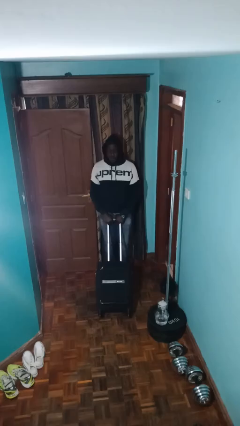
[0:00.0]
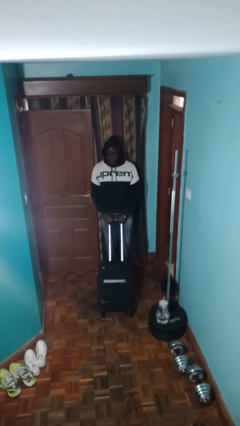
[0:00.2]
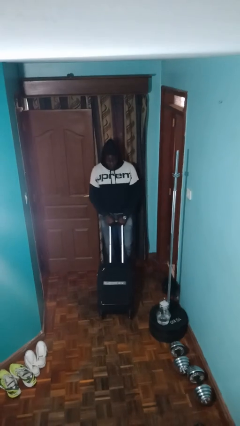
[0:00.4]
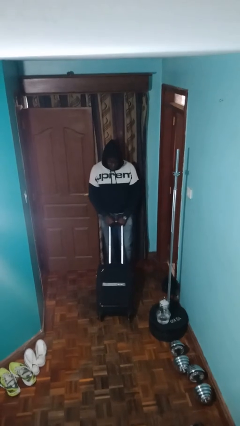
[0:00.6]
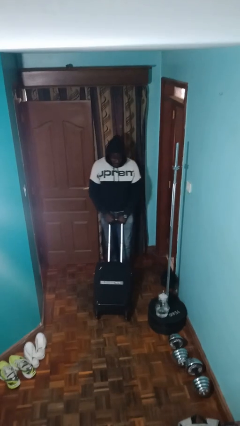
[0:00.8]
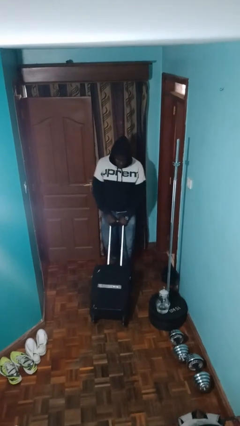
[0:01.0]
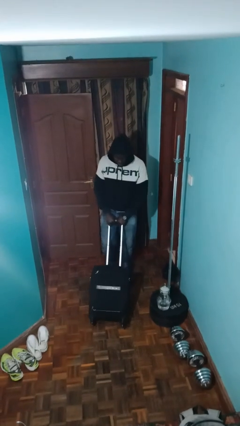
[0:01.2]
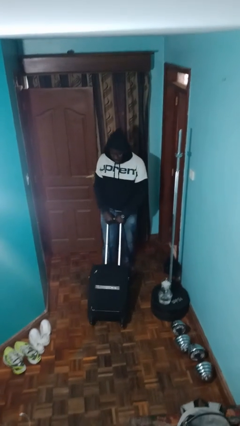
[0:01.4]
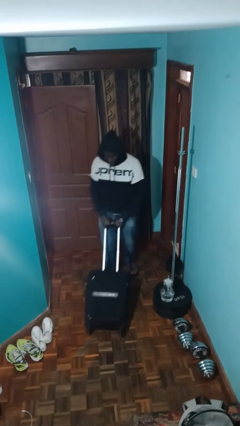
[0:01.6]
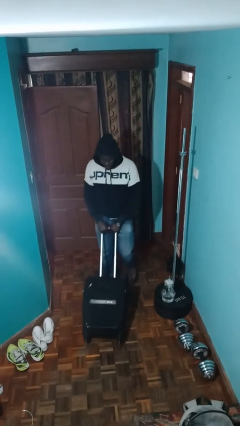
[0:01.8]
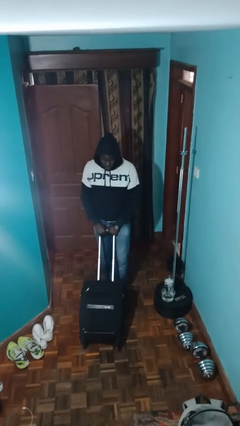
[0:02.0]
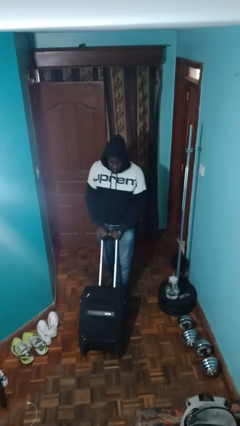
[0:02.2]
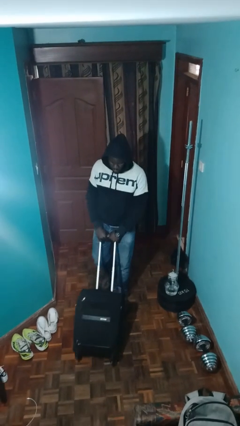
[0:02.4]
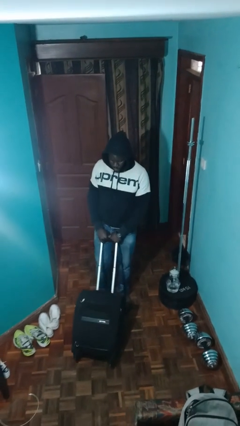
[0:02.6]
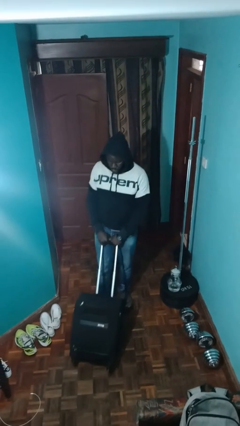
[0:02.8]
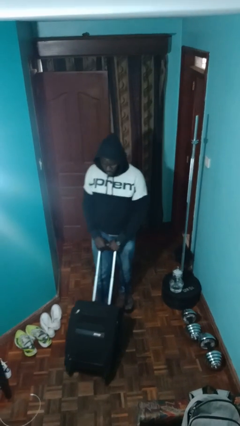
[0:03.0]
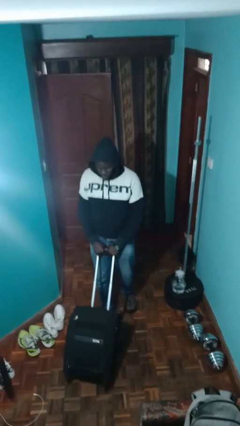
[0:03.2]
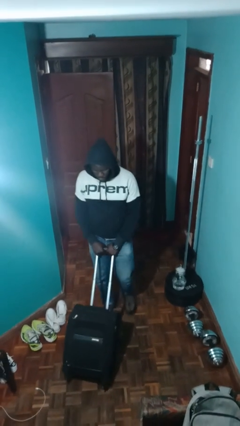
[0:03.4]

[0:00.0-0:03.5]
person pushes wheeled cart

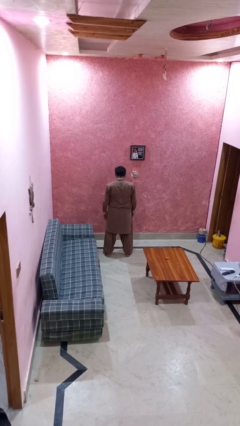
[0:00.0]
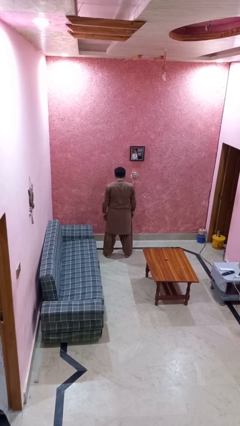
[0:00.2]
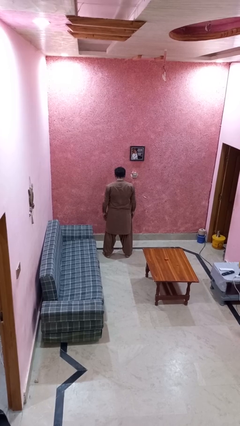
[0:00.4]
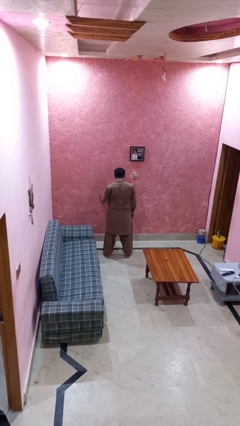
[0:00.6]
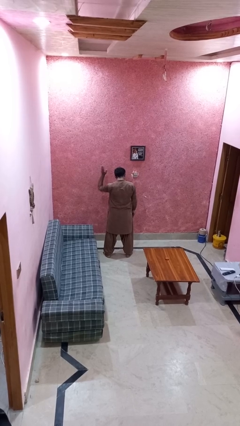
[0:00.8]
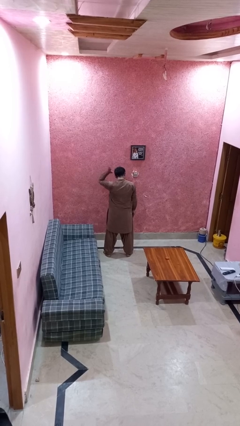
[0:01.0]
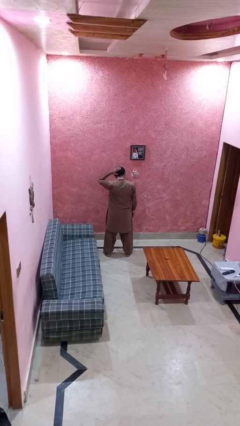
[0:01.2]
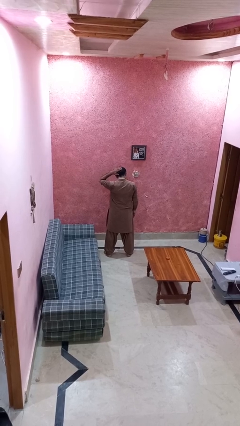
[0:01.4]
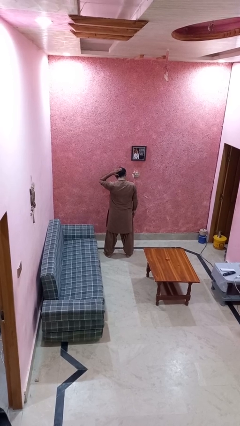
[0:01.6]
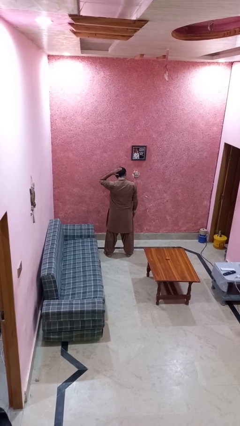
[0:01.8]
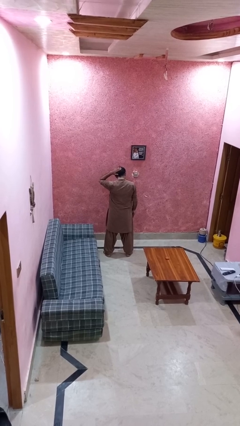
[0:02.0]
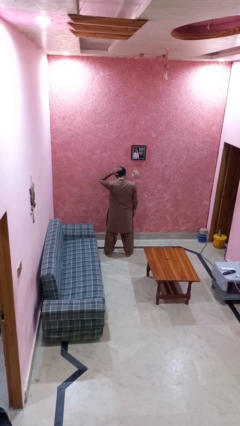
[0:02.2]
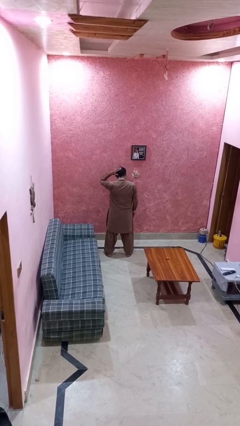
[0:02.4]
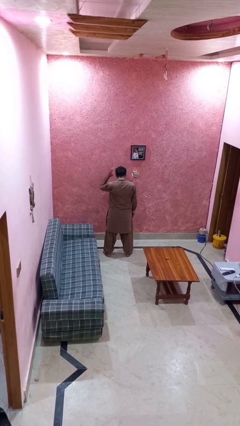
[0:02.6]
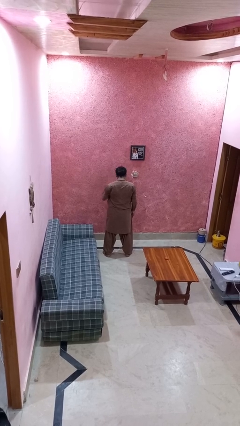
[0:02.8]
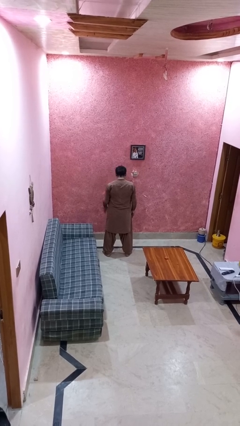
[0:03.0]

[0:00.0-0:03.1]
person pats head

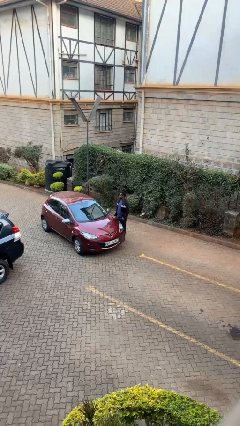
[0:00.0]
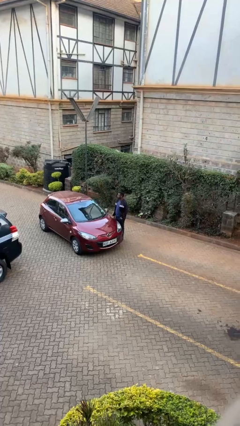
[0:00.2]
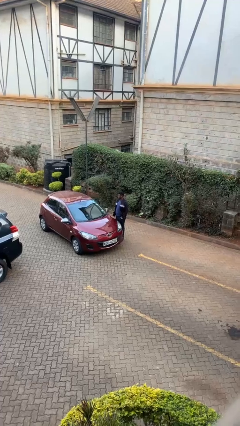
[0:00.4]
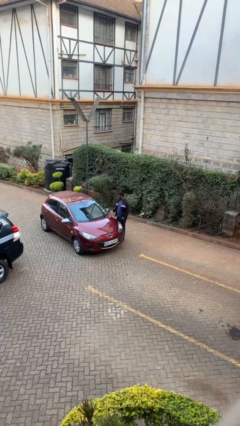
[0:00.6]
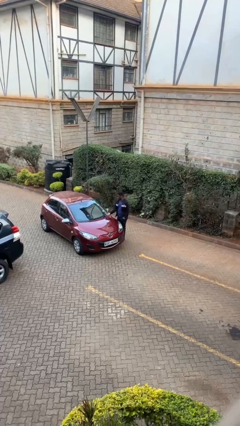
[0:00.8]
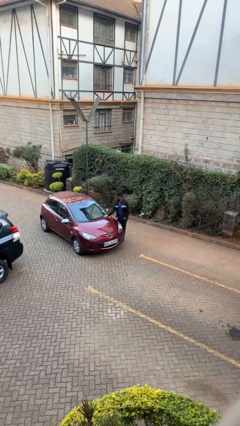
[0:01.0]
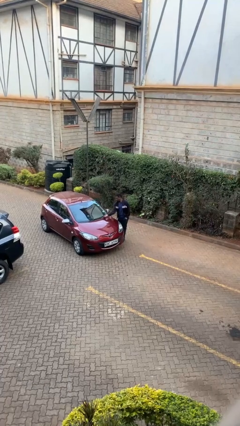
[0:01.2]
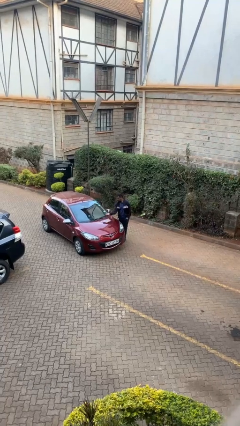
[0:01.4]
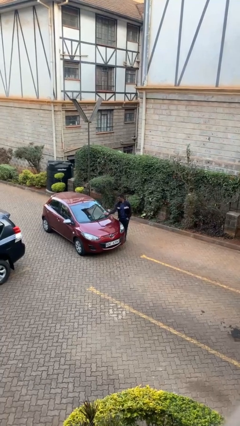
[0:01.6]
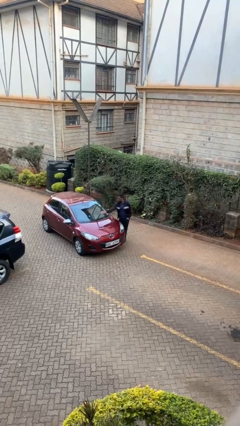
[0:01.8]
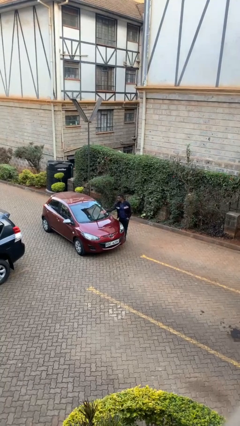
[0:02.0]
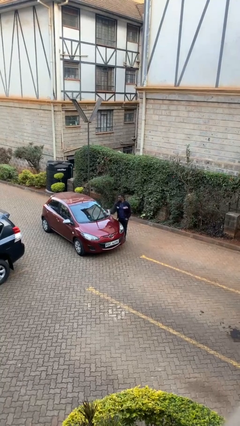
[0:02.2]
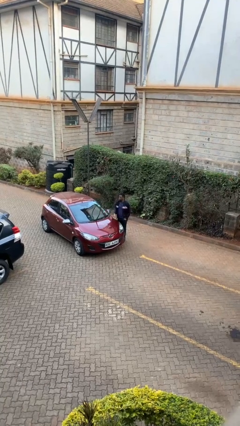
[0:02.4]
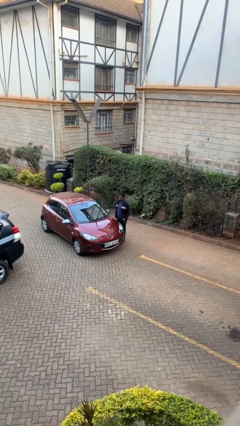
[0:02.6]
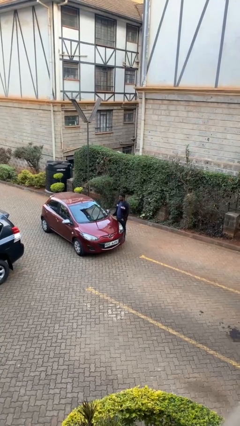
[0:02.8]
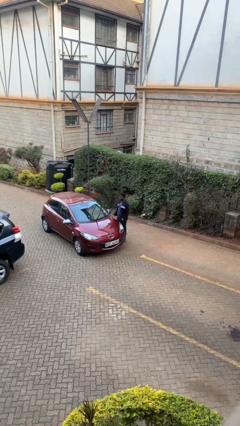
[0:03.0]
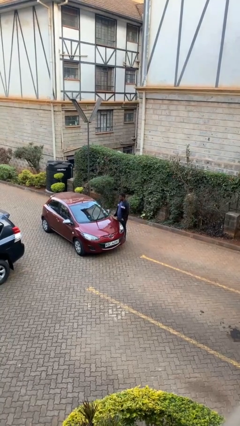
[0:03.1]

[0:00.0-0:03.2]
person flips up car wipers

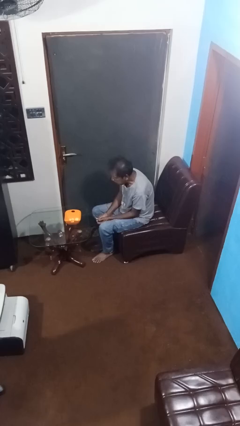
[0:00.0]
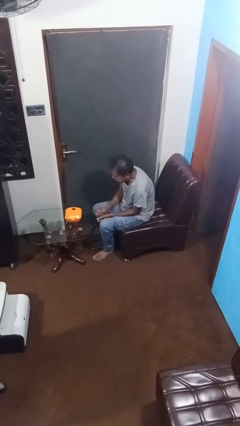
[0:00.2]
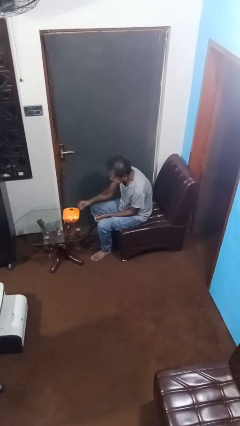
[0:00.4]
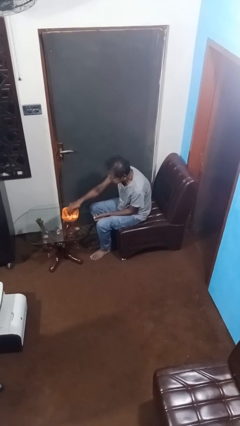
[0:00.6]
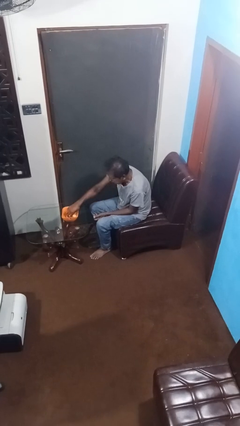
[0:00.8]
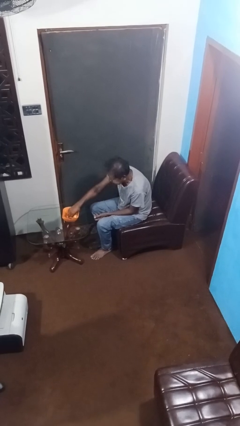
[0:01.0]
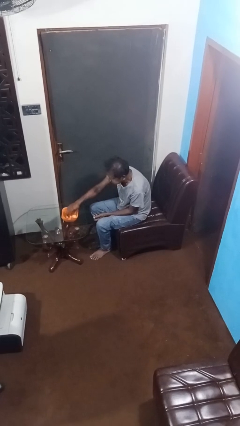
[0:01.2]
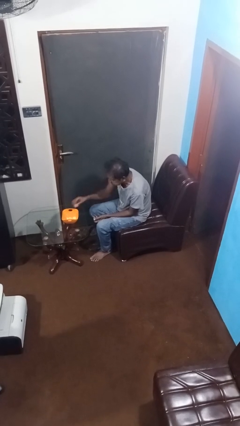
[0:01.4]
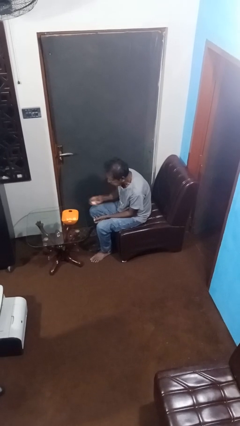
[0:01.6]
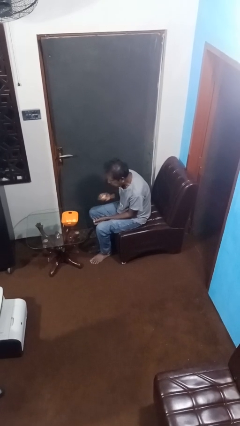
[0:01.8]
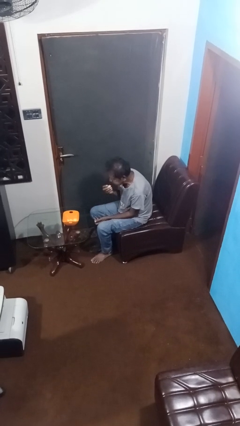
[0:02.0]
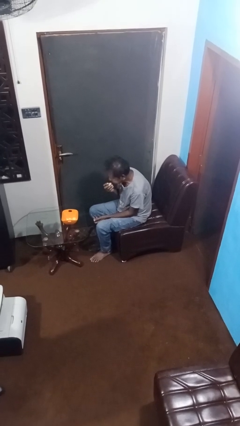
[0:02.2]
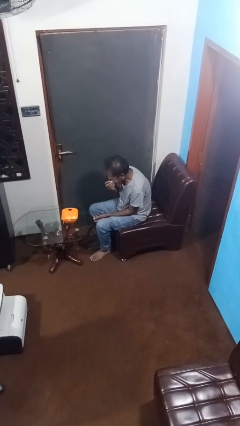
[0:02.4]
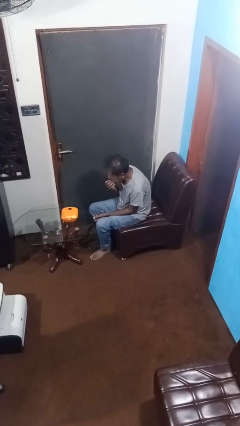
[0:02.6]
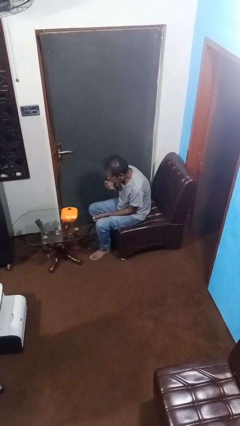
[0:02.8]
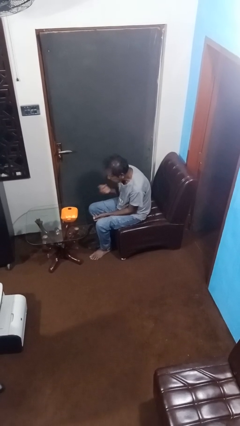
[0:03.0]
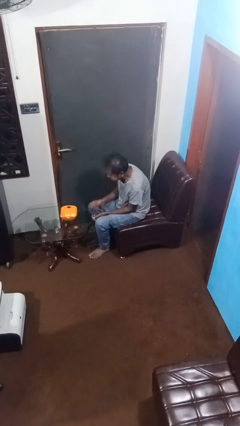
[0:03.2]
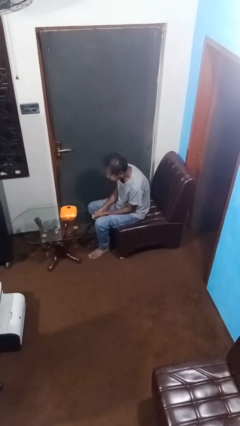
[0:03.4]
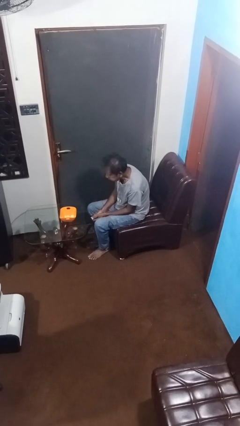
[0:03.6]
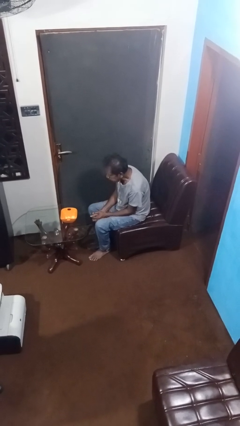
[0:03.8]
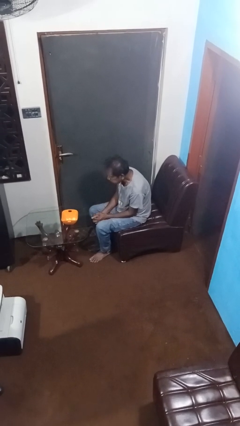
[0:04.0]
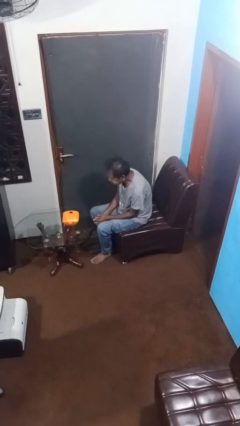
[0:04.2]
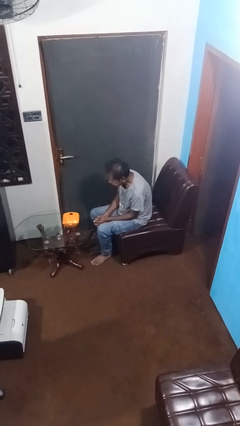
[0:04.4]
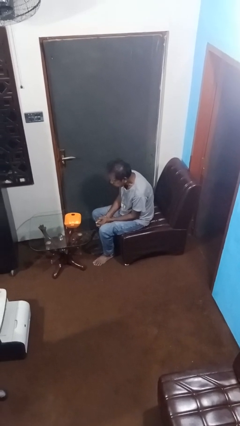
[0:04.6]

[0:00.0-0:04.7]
person eats with hands

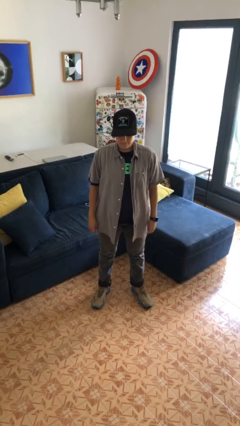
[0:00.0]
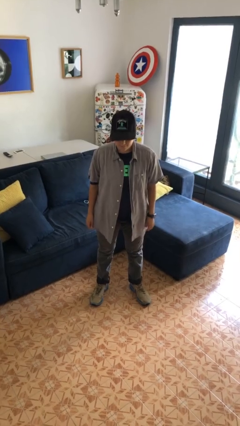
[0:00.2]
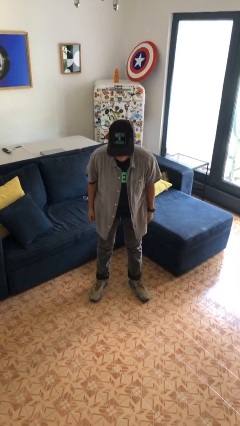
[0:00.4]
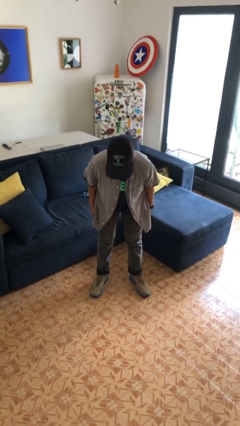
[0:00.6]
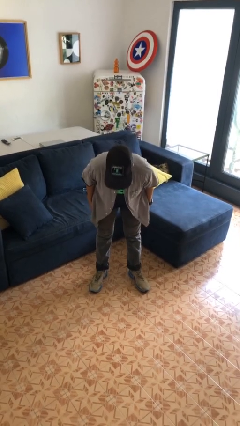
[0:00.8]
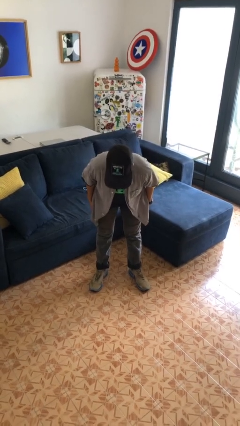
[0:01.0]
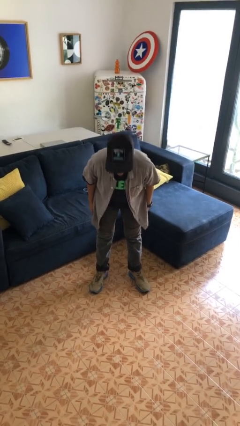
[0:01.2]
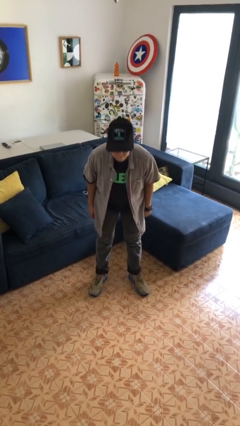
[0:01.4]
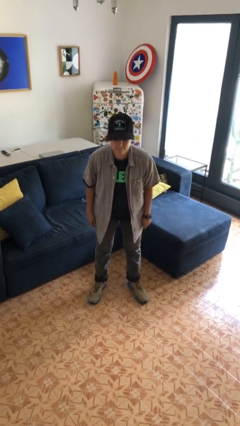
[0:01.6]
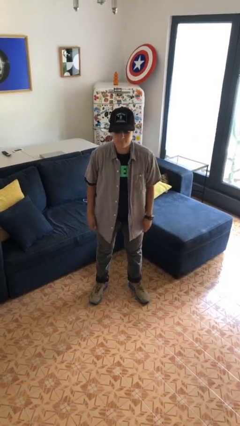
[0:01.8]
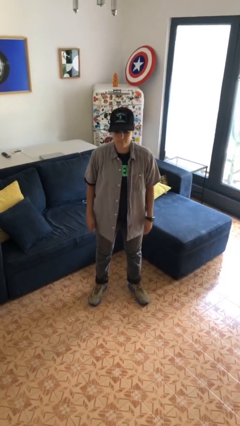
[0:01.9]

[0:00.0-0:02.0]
person bows

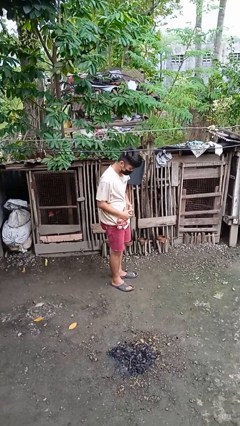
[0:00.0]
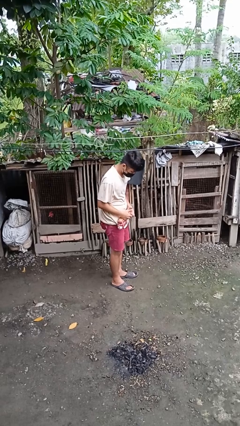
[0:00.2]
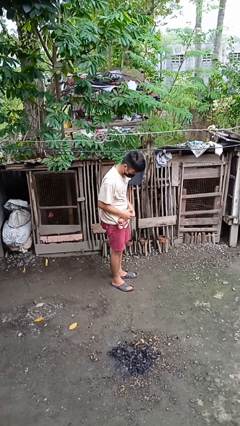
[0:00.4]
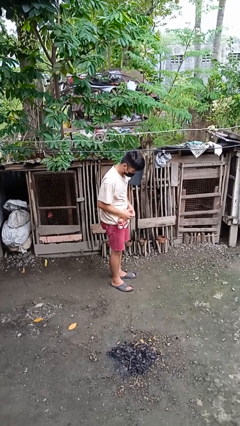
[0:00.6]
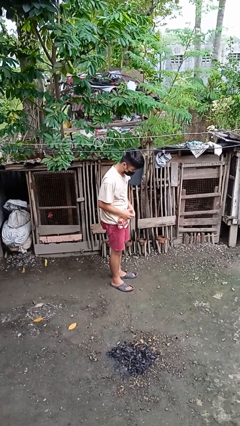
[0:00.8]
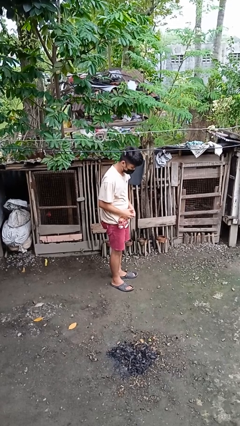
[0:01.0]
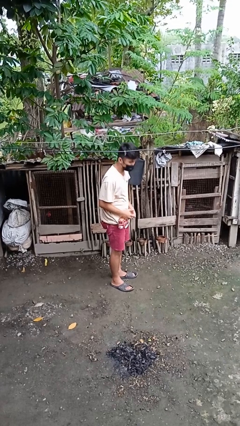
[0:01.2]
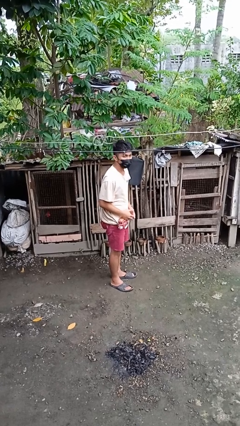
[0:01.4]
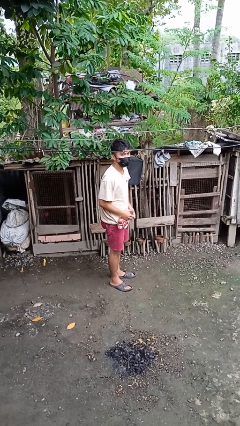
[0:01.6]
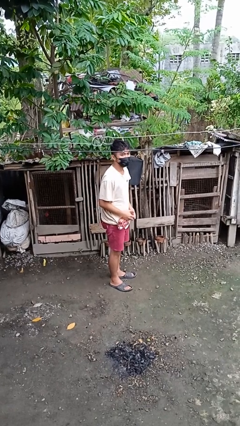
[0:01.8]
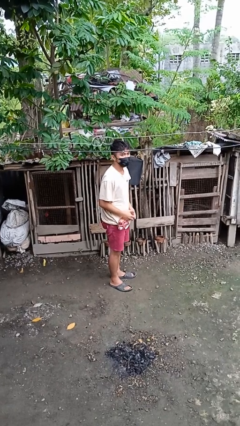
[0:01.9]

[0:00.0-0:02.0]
person catches dropped object
